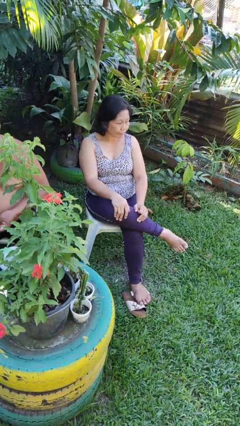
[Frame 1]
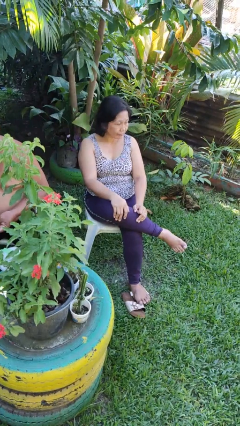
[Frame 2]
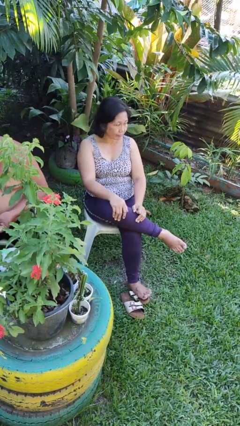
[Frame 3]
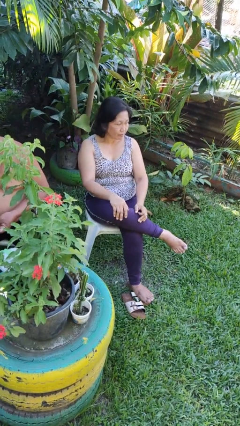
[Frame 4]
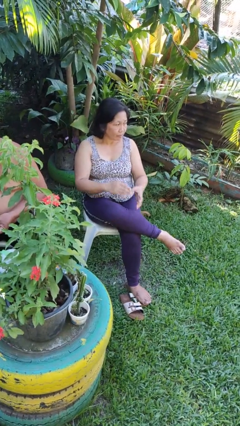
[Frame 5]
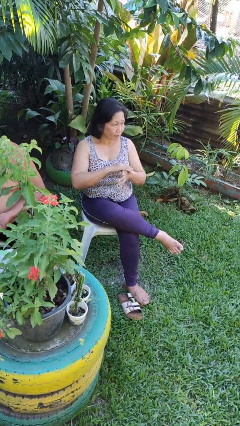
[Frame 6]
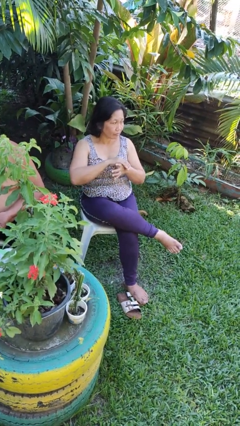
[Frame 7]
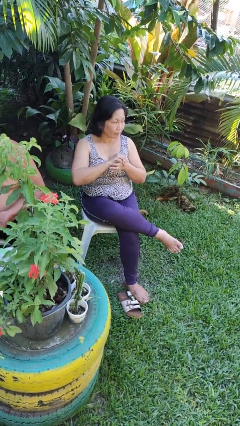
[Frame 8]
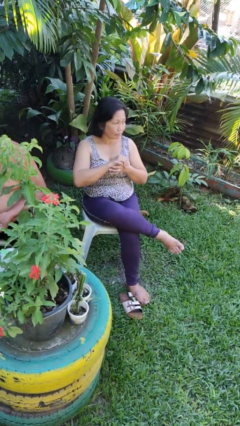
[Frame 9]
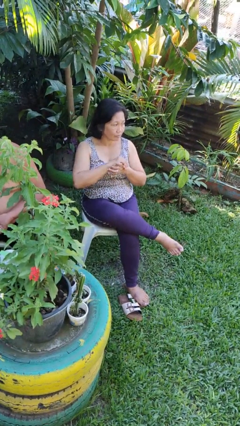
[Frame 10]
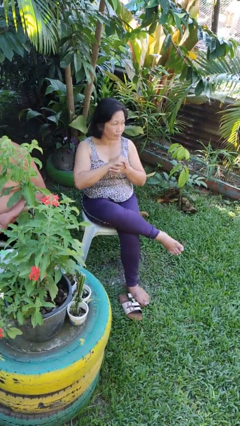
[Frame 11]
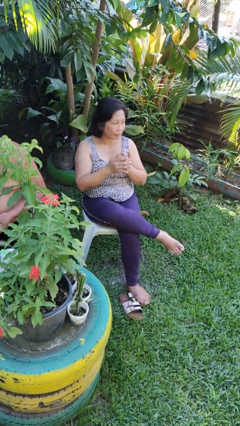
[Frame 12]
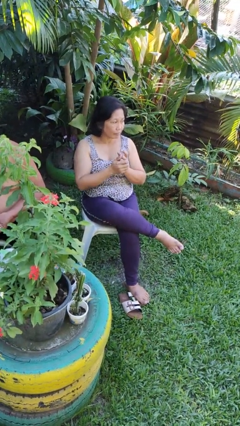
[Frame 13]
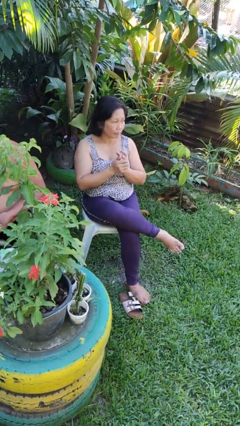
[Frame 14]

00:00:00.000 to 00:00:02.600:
person cracks knuckles

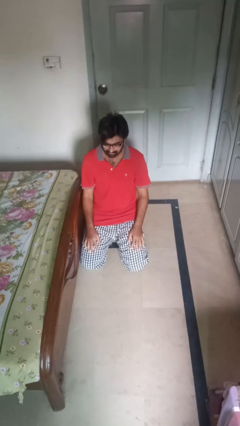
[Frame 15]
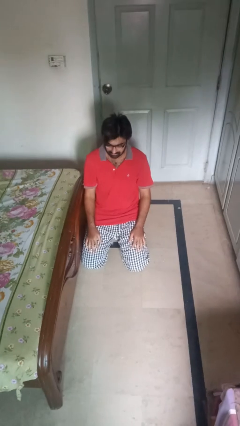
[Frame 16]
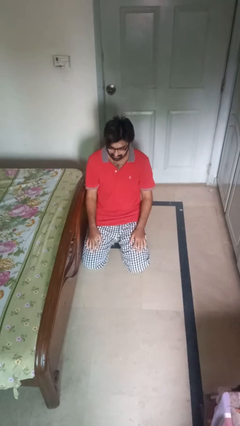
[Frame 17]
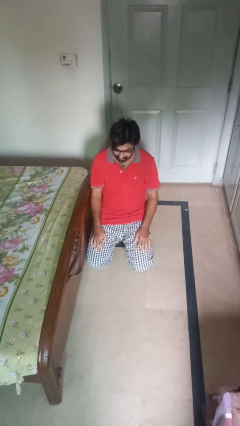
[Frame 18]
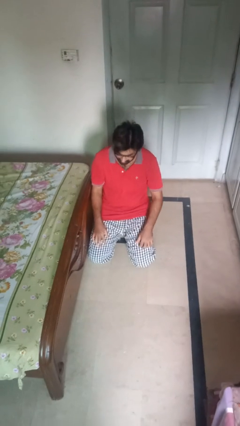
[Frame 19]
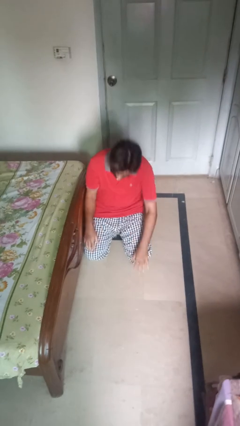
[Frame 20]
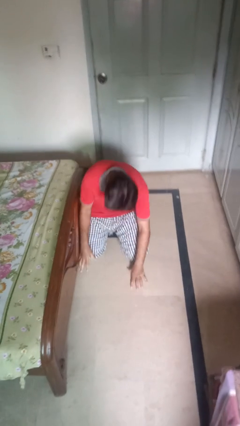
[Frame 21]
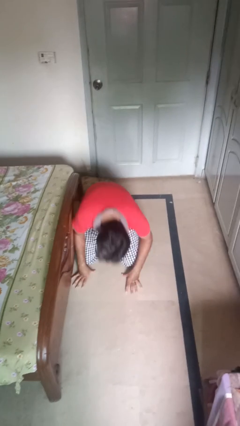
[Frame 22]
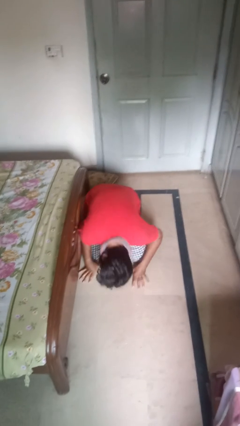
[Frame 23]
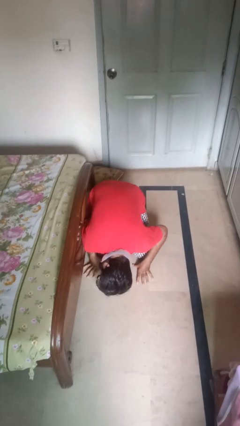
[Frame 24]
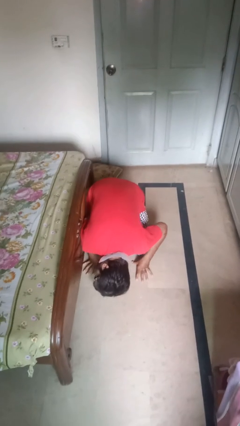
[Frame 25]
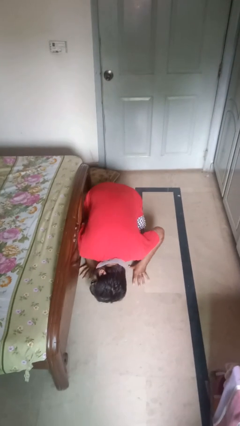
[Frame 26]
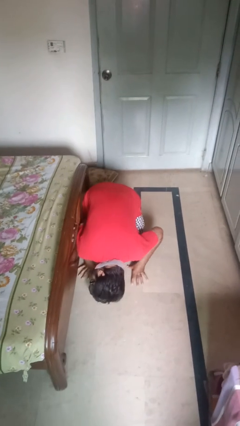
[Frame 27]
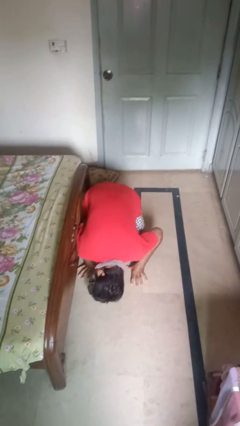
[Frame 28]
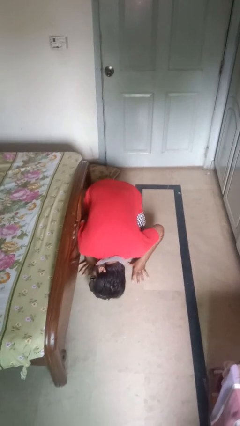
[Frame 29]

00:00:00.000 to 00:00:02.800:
person searches under bed

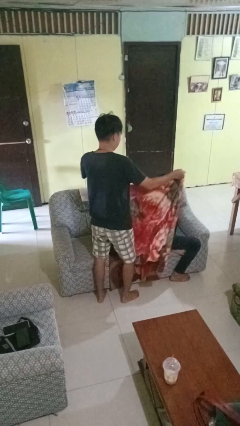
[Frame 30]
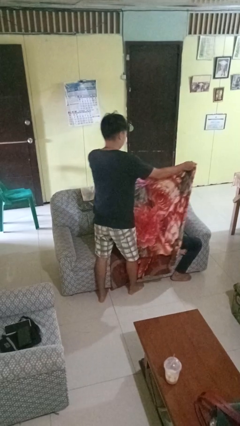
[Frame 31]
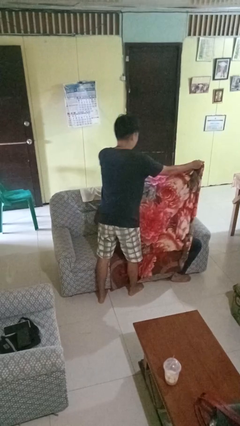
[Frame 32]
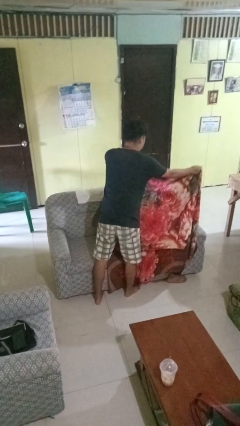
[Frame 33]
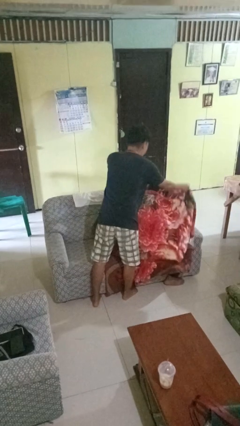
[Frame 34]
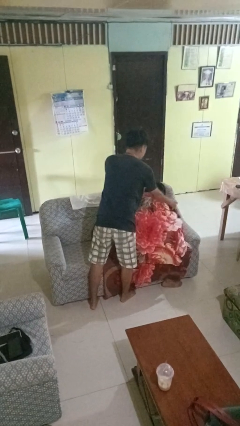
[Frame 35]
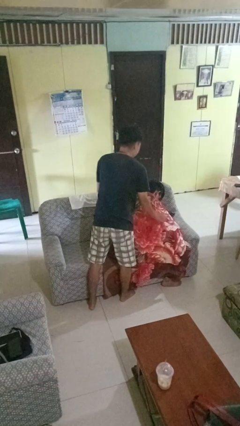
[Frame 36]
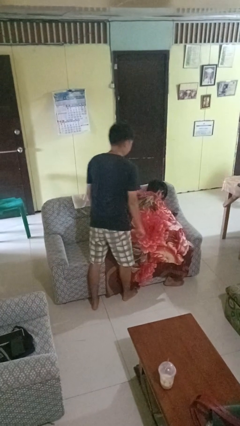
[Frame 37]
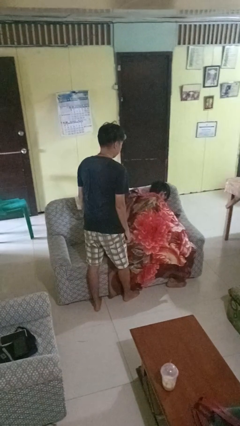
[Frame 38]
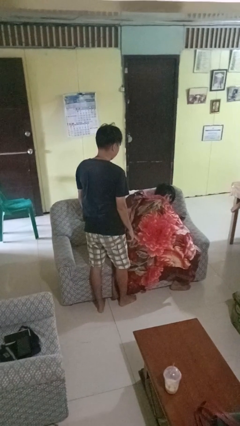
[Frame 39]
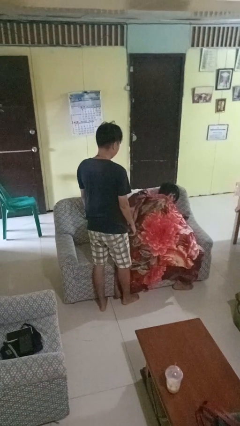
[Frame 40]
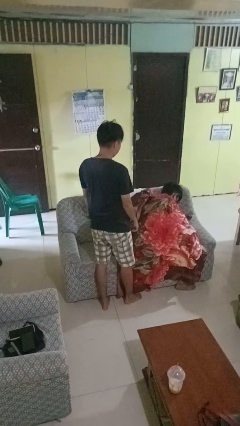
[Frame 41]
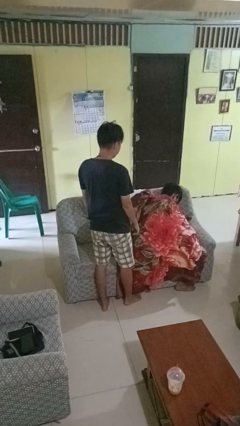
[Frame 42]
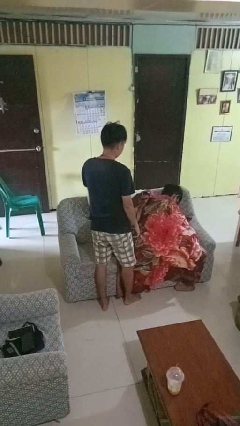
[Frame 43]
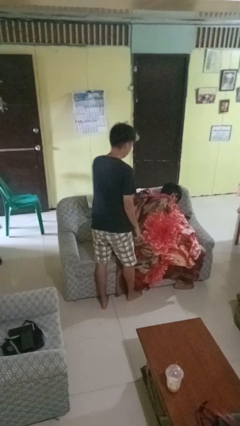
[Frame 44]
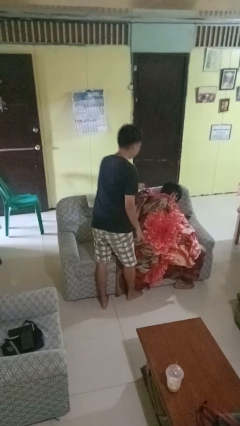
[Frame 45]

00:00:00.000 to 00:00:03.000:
person covers friend with blanket

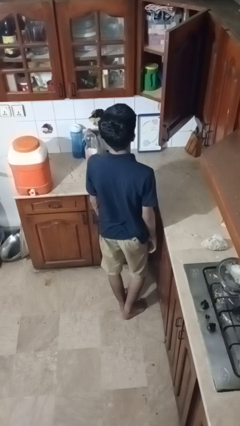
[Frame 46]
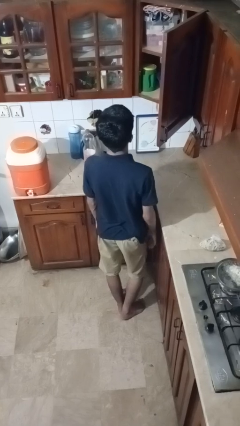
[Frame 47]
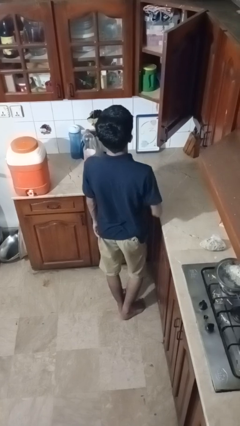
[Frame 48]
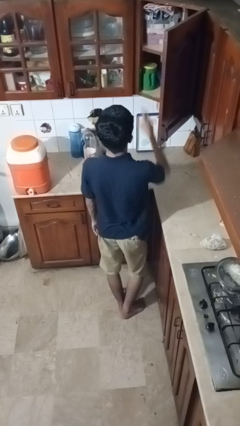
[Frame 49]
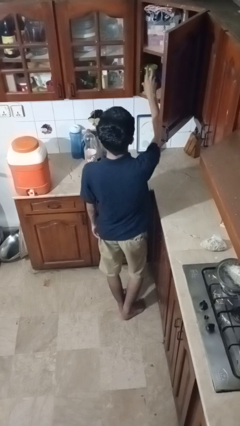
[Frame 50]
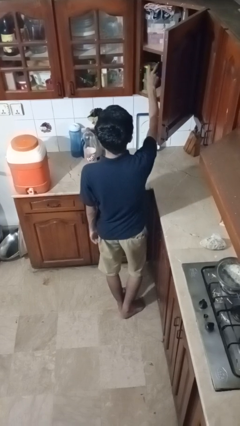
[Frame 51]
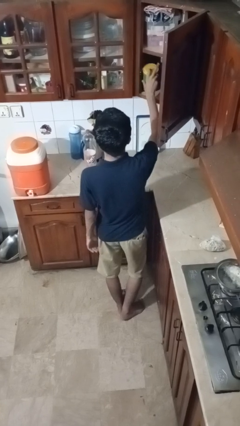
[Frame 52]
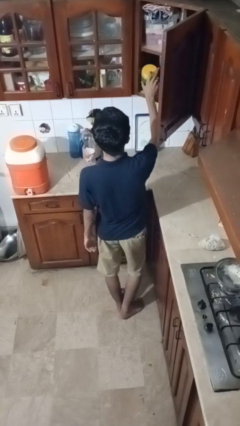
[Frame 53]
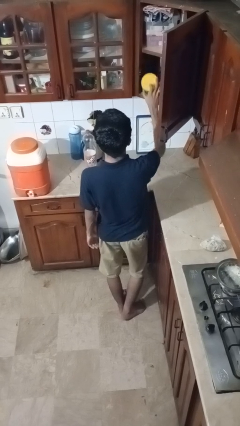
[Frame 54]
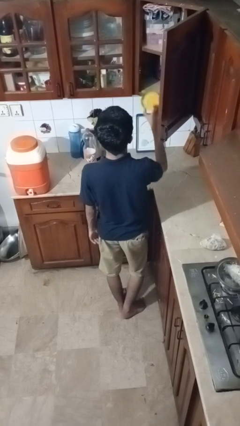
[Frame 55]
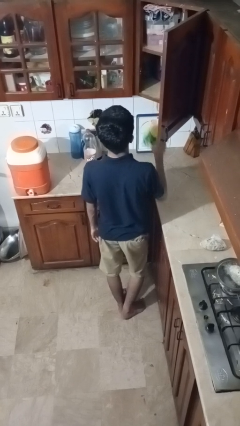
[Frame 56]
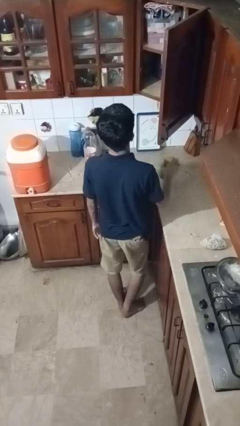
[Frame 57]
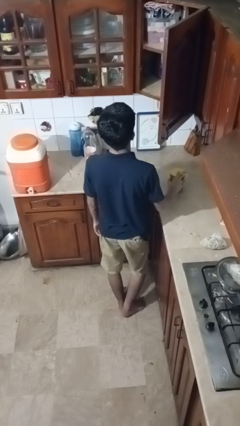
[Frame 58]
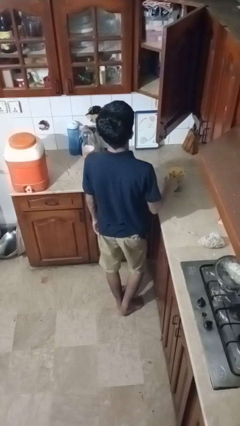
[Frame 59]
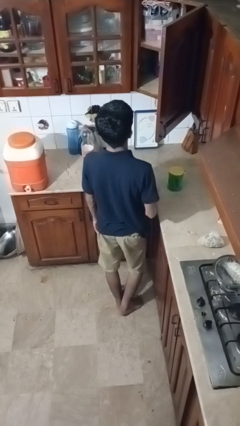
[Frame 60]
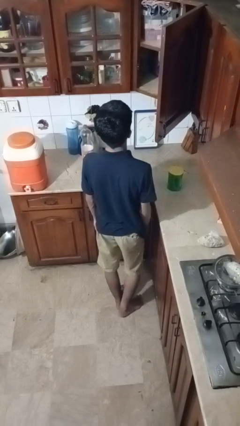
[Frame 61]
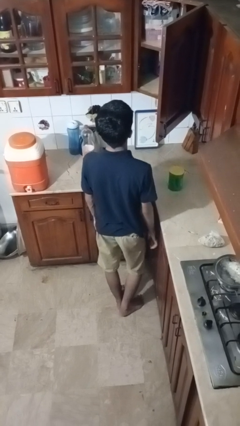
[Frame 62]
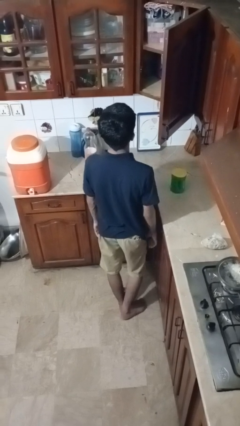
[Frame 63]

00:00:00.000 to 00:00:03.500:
person takes object from cabinet

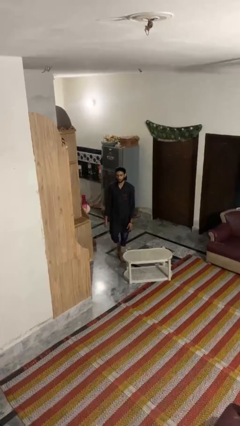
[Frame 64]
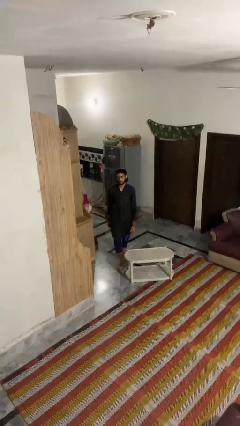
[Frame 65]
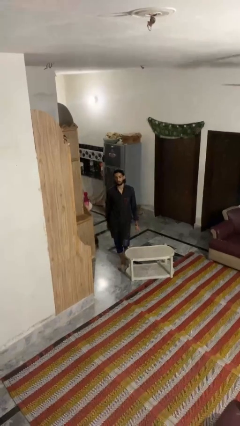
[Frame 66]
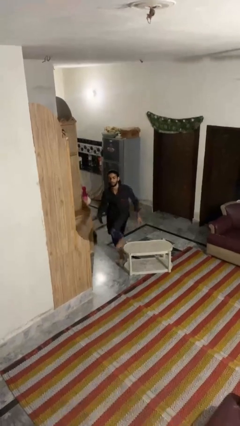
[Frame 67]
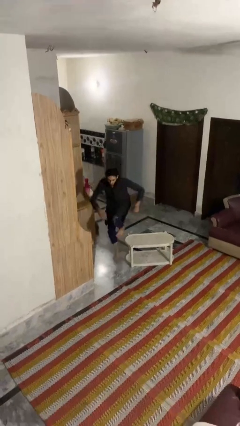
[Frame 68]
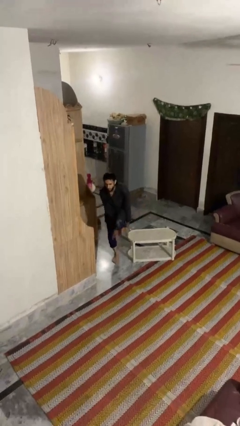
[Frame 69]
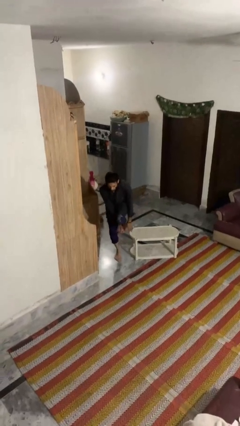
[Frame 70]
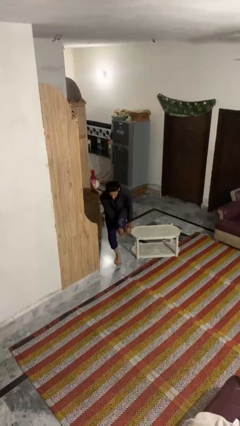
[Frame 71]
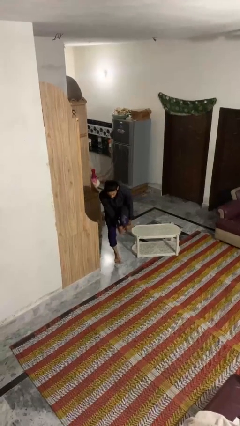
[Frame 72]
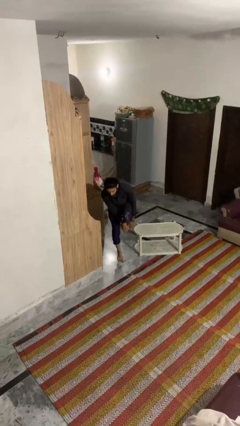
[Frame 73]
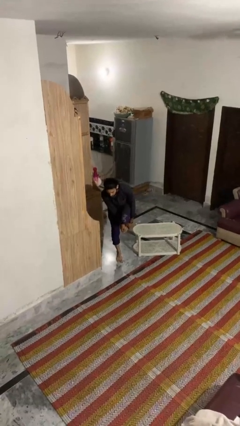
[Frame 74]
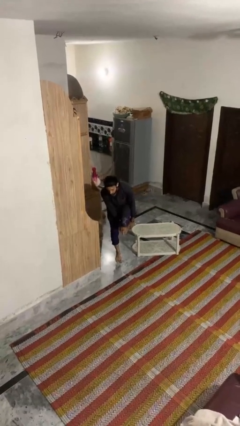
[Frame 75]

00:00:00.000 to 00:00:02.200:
person bumps into table

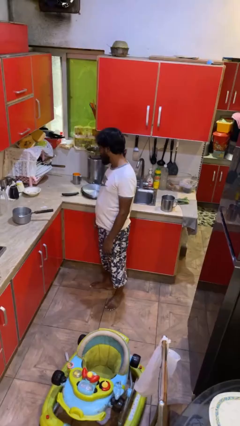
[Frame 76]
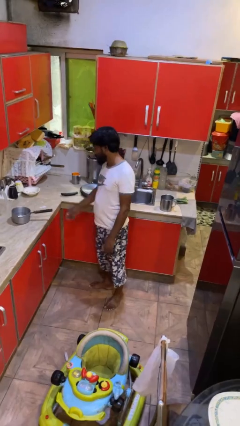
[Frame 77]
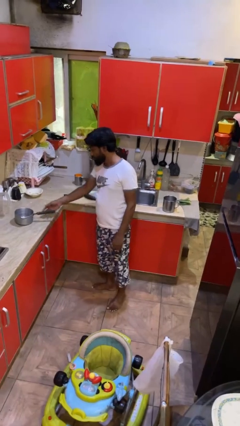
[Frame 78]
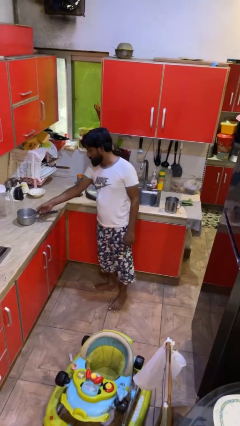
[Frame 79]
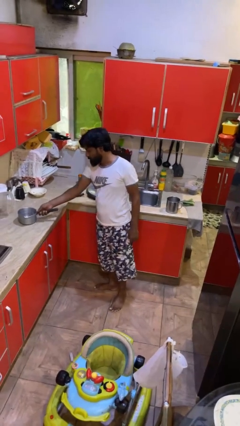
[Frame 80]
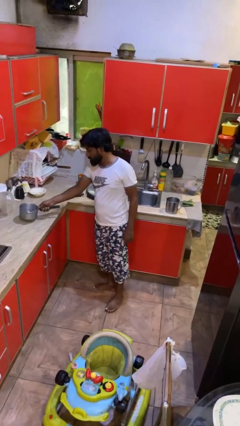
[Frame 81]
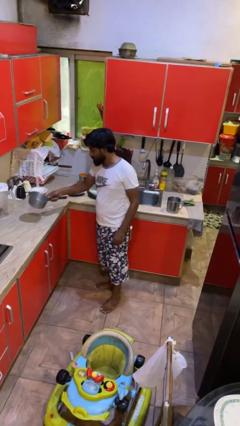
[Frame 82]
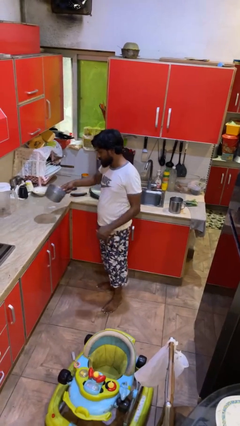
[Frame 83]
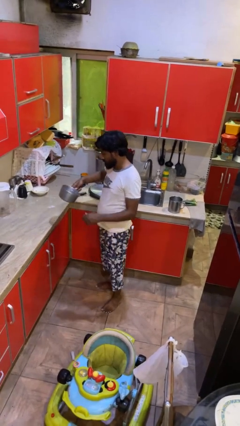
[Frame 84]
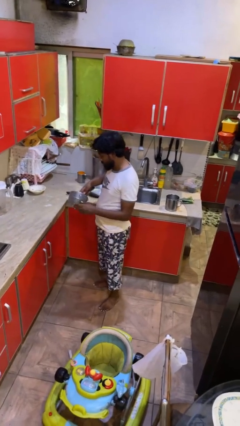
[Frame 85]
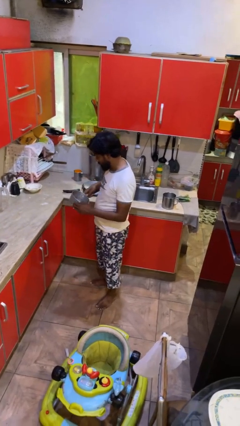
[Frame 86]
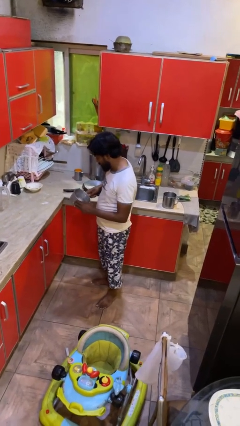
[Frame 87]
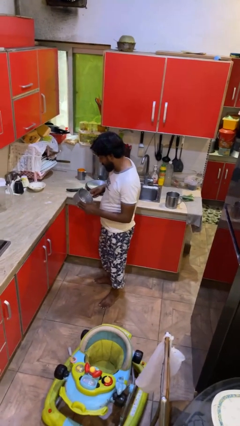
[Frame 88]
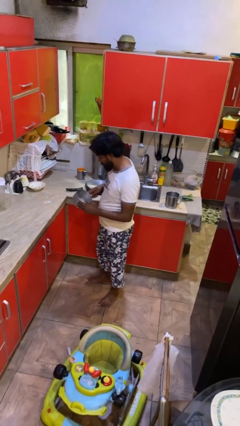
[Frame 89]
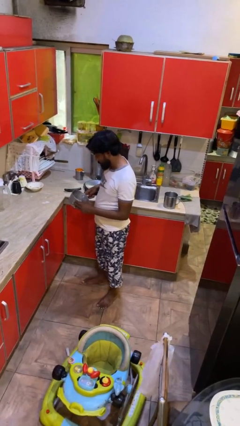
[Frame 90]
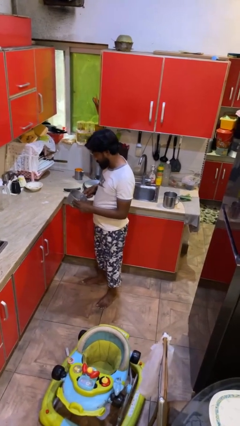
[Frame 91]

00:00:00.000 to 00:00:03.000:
person picks up object from countertop

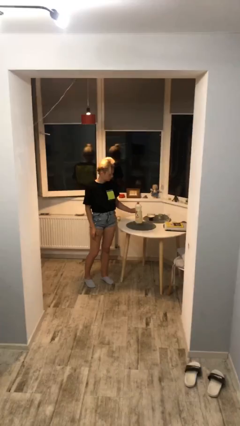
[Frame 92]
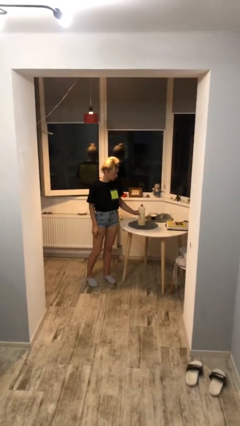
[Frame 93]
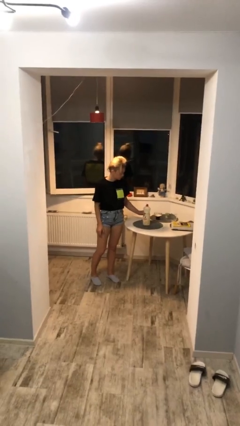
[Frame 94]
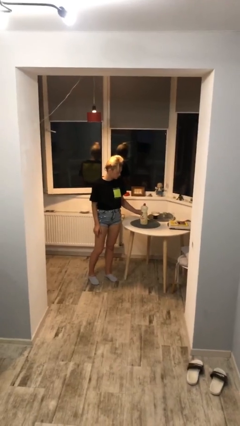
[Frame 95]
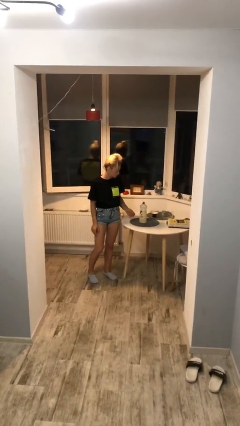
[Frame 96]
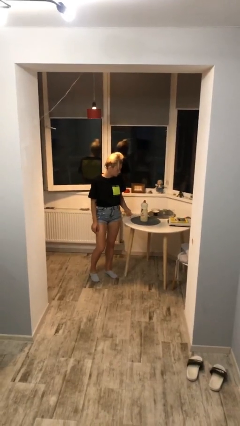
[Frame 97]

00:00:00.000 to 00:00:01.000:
person puts down object on table
